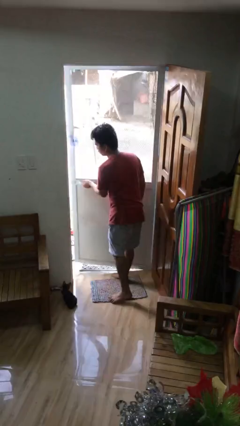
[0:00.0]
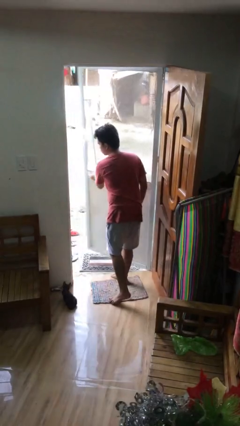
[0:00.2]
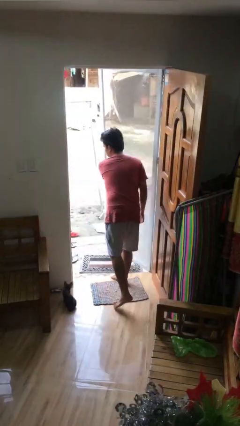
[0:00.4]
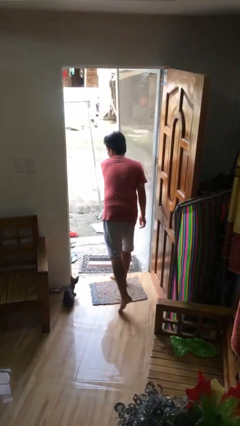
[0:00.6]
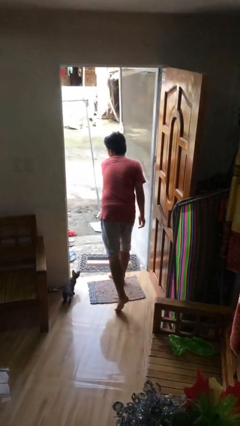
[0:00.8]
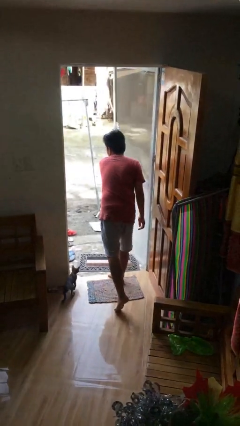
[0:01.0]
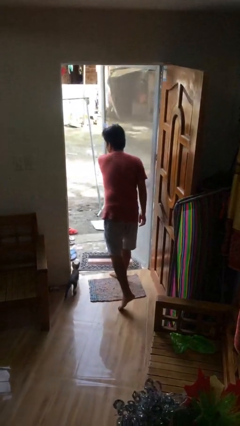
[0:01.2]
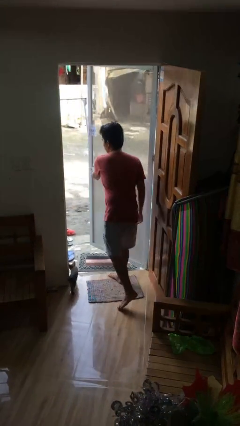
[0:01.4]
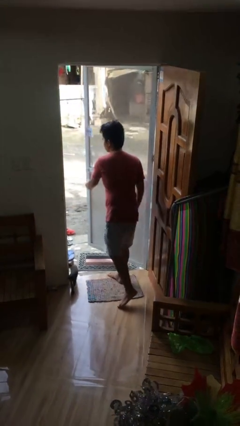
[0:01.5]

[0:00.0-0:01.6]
person opens facility door

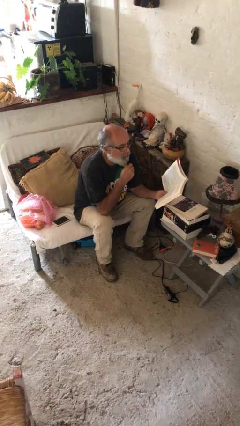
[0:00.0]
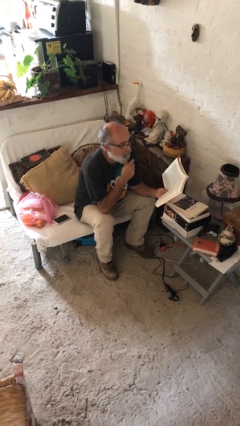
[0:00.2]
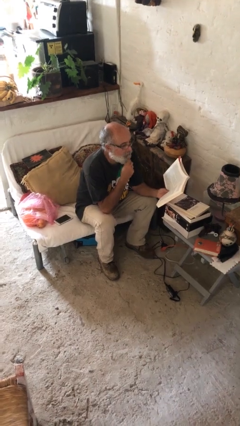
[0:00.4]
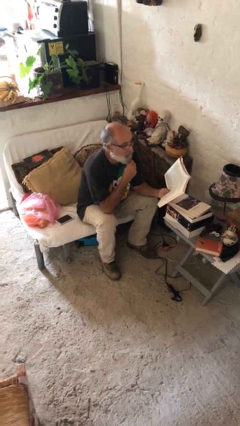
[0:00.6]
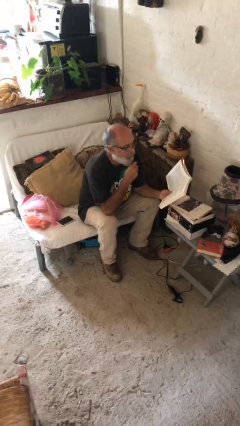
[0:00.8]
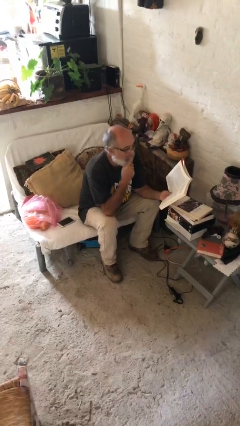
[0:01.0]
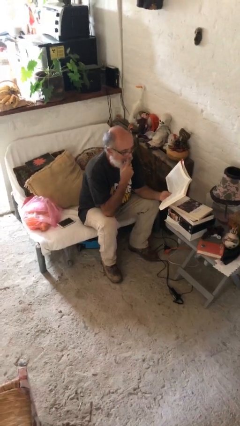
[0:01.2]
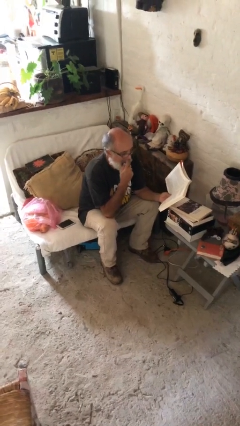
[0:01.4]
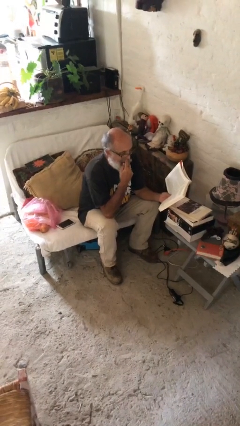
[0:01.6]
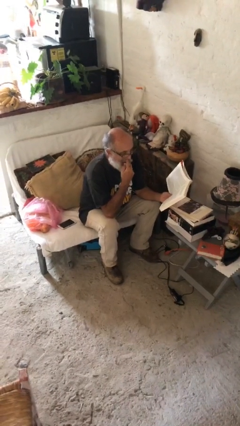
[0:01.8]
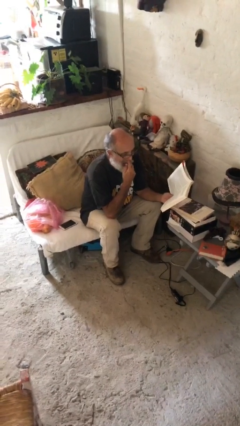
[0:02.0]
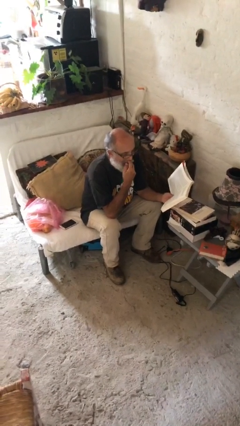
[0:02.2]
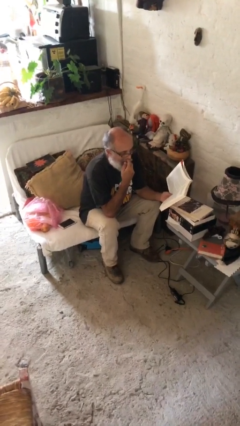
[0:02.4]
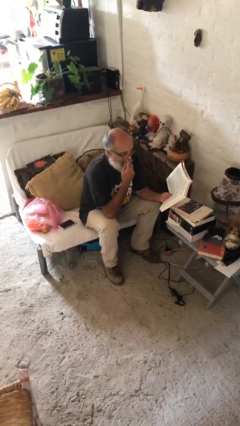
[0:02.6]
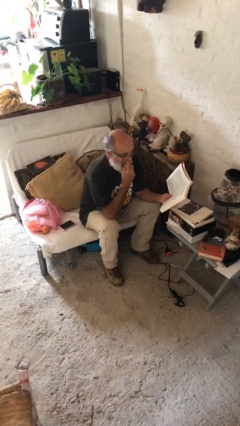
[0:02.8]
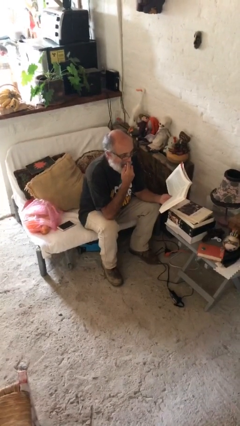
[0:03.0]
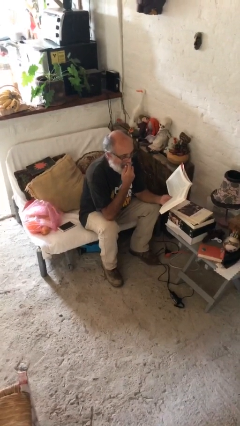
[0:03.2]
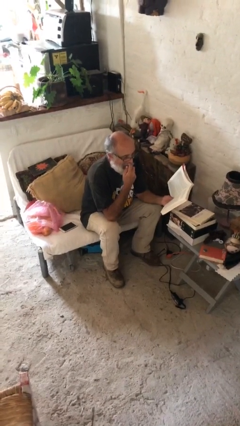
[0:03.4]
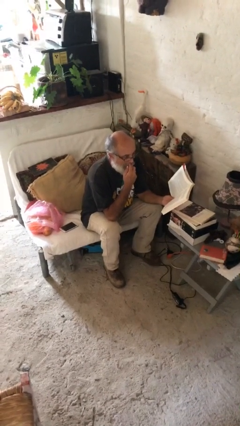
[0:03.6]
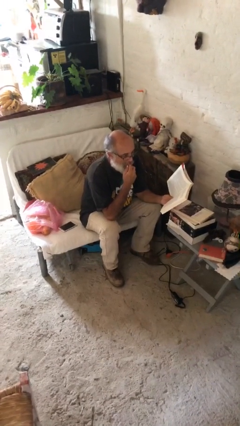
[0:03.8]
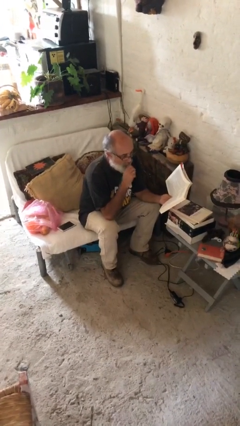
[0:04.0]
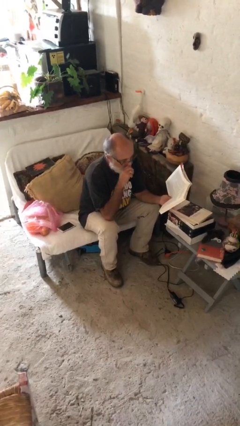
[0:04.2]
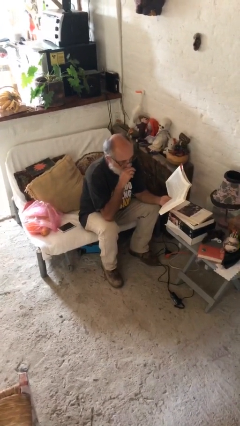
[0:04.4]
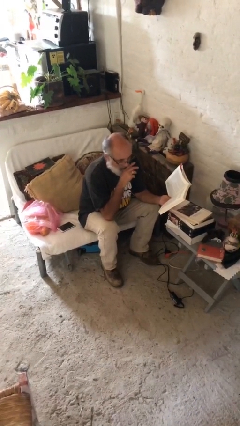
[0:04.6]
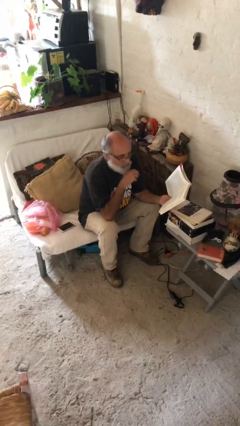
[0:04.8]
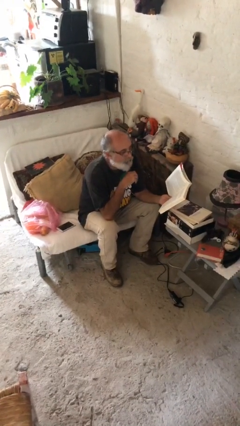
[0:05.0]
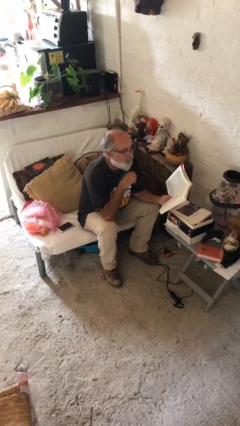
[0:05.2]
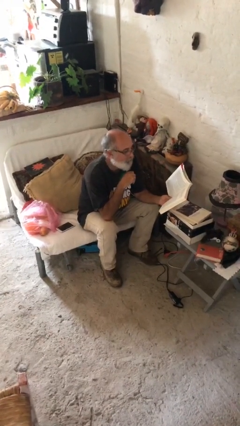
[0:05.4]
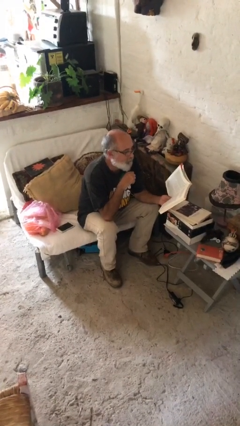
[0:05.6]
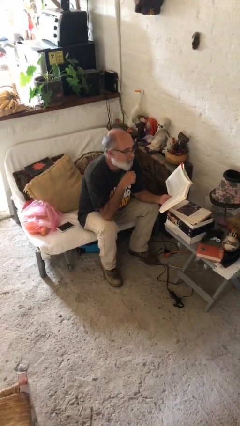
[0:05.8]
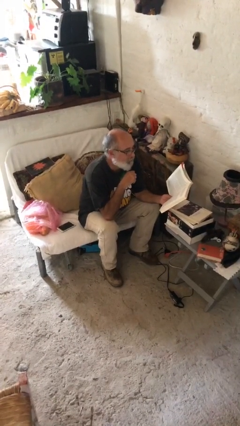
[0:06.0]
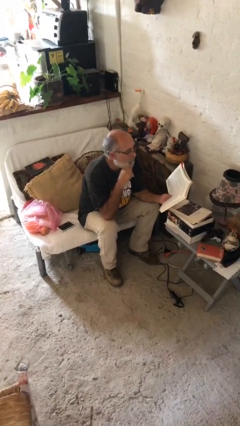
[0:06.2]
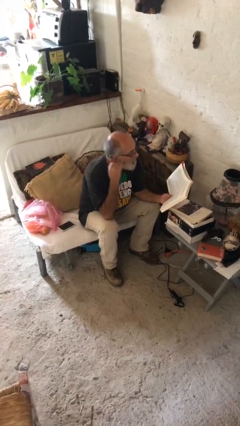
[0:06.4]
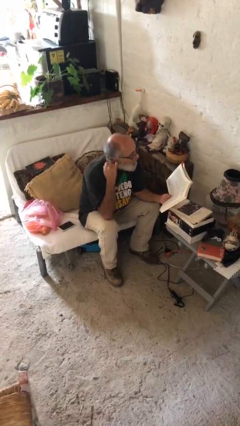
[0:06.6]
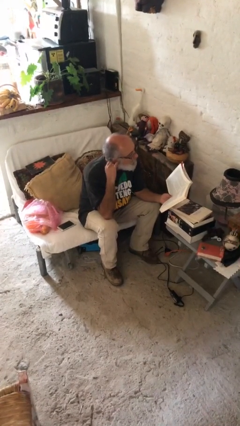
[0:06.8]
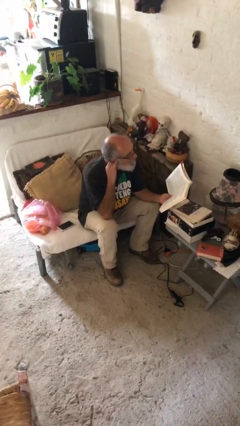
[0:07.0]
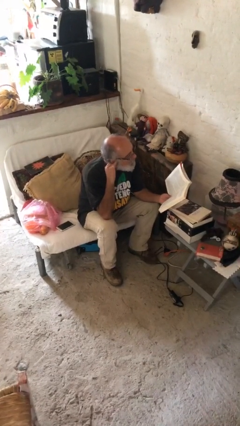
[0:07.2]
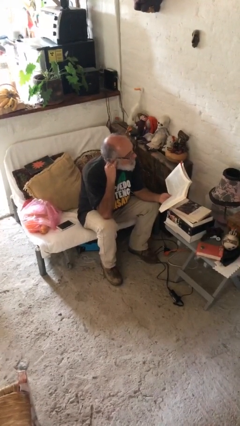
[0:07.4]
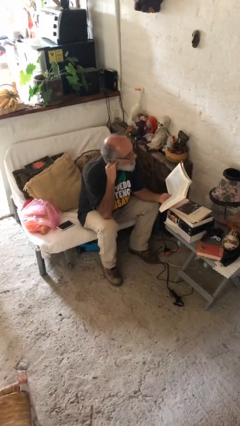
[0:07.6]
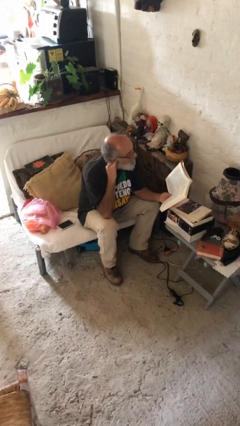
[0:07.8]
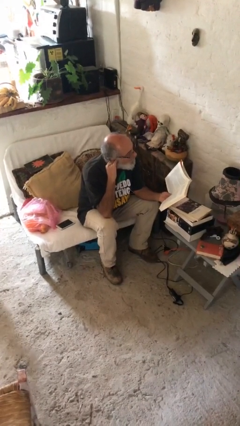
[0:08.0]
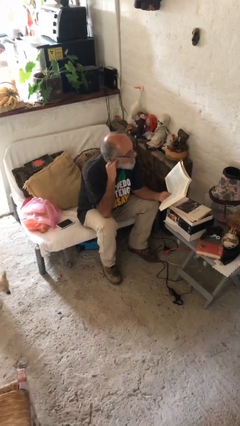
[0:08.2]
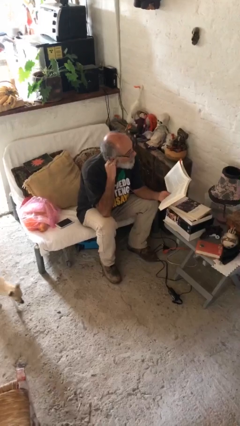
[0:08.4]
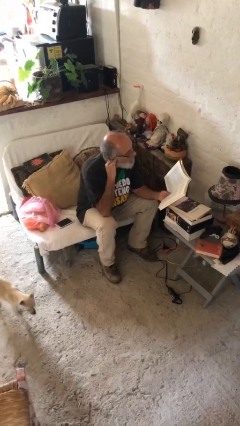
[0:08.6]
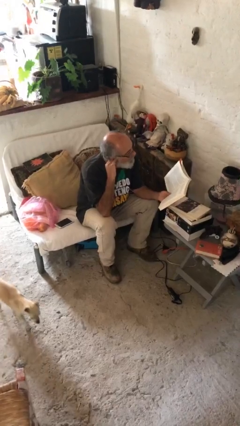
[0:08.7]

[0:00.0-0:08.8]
person reads document

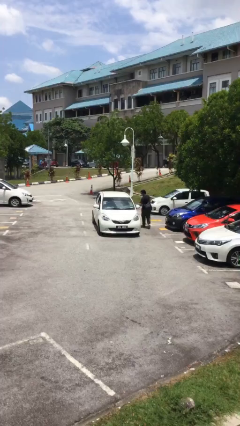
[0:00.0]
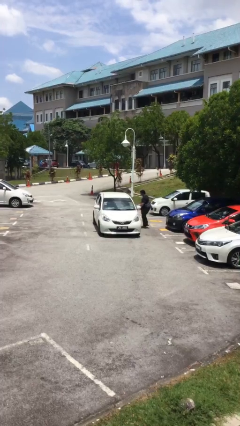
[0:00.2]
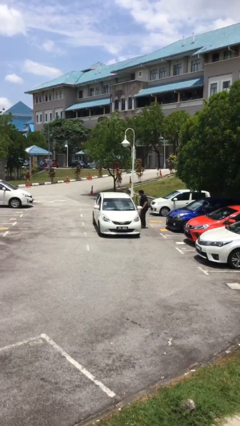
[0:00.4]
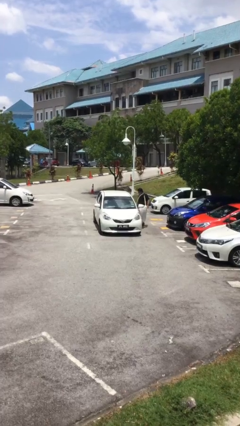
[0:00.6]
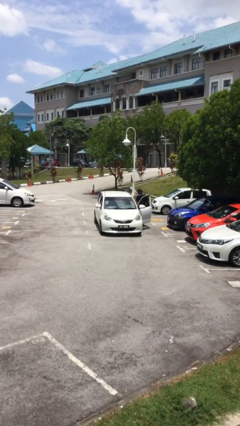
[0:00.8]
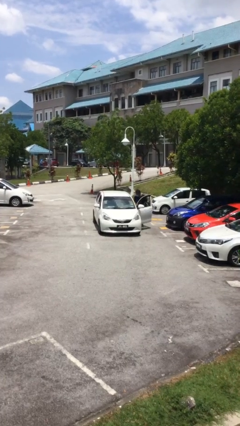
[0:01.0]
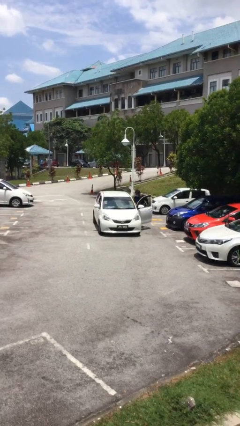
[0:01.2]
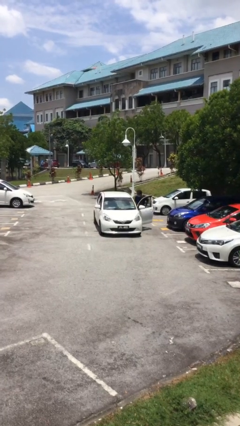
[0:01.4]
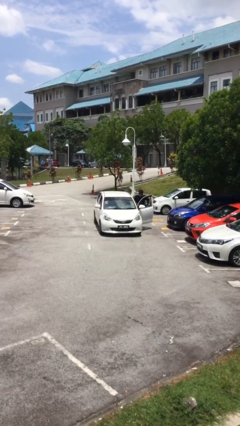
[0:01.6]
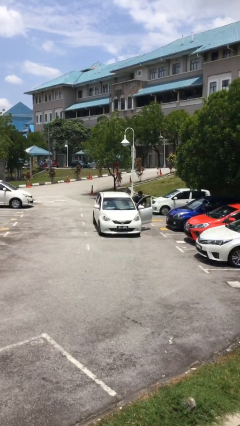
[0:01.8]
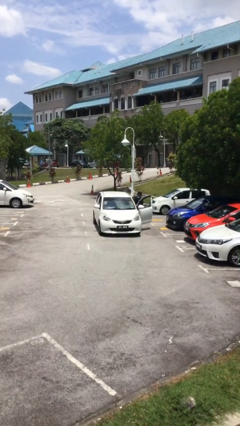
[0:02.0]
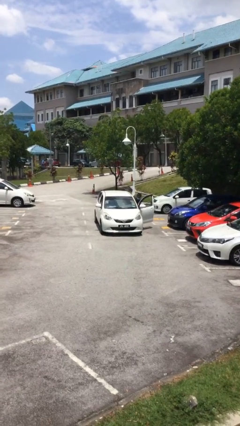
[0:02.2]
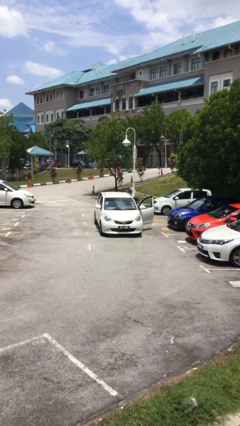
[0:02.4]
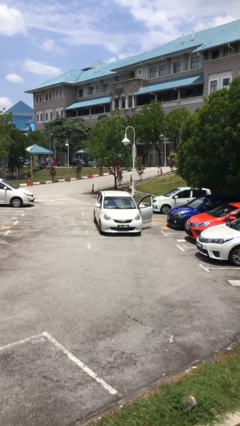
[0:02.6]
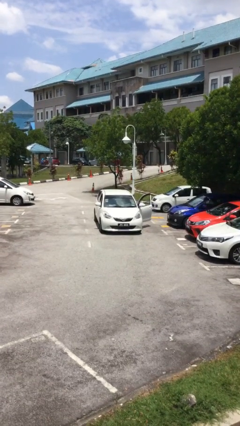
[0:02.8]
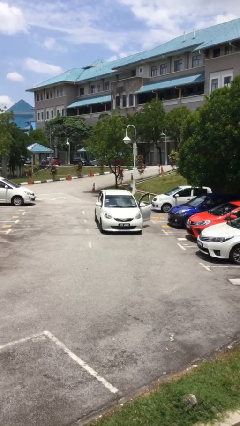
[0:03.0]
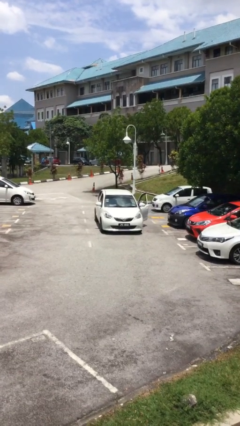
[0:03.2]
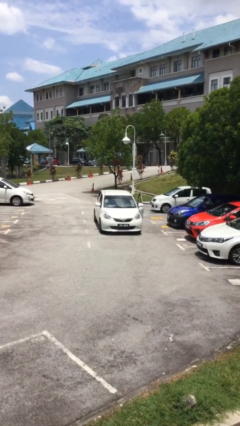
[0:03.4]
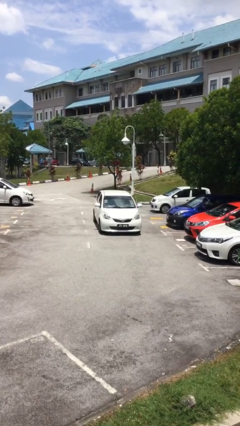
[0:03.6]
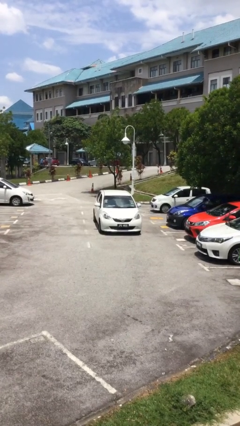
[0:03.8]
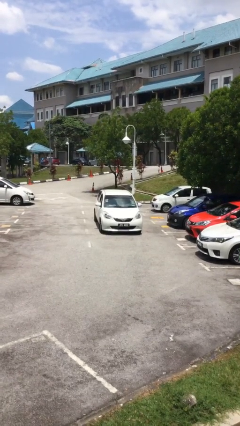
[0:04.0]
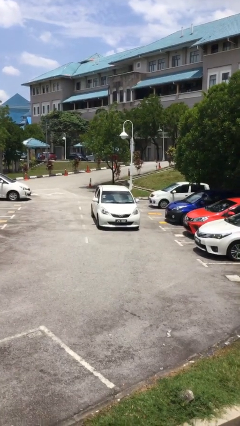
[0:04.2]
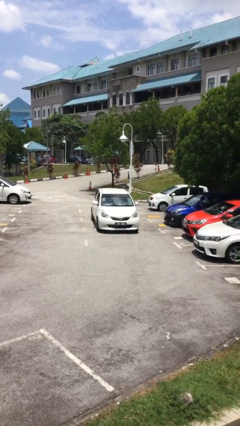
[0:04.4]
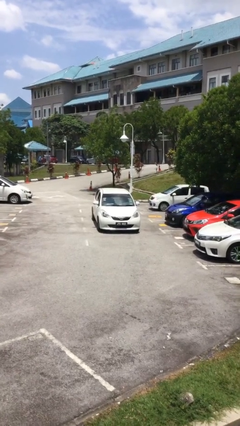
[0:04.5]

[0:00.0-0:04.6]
car picks up person

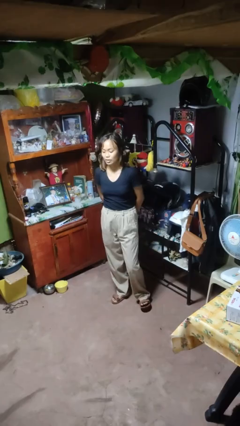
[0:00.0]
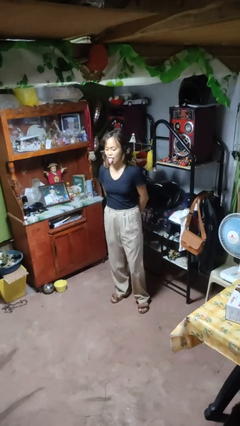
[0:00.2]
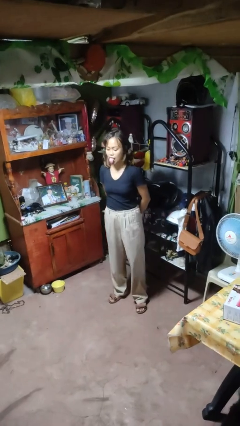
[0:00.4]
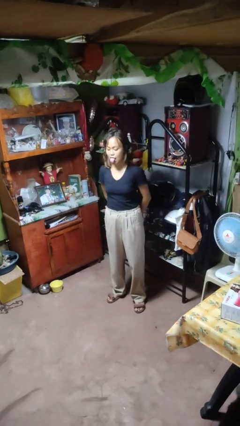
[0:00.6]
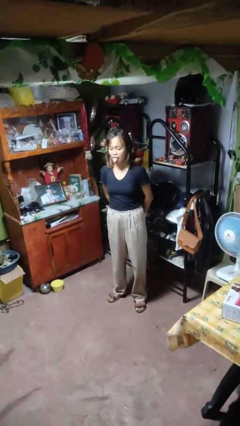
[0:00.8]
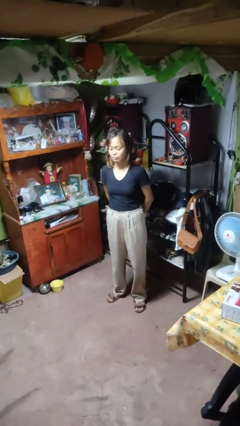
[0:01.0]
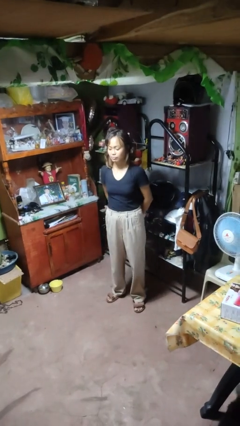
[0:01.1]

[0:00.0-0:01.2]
person sticks out tongue

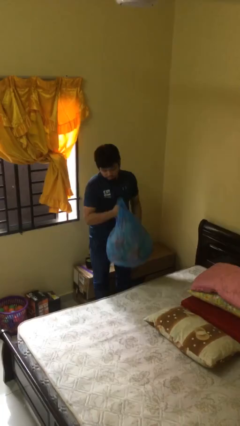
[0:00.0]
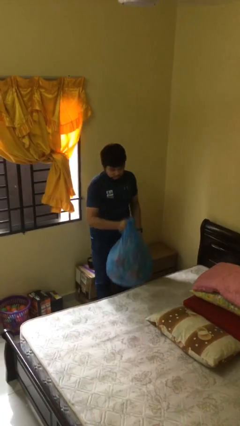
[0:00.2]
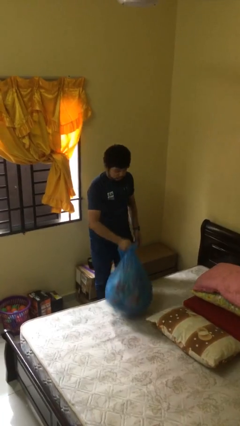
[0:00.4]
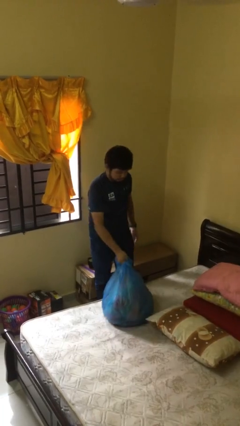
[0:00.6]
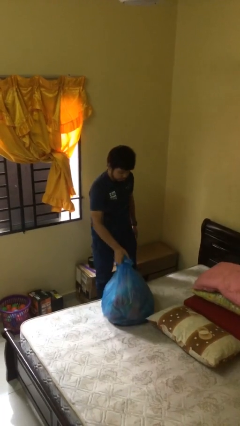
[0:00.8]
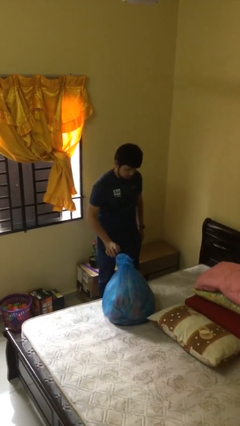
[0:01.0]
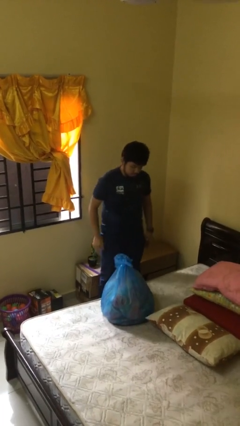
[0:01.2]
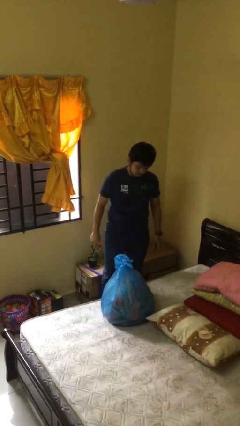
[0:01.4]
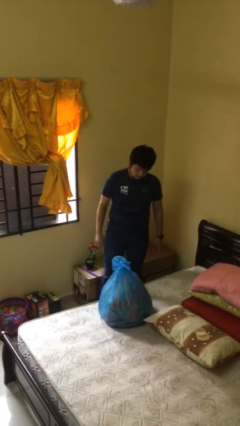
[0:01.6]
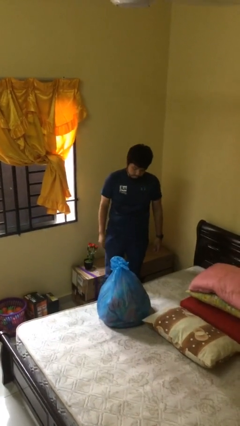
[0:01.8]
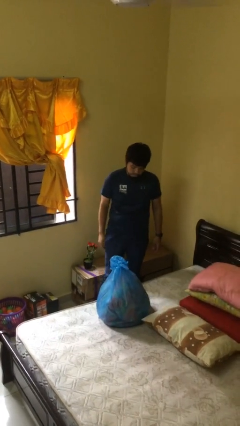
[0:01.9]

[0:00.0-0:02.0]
person puts down object on bed
